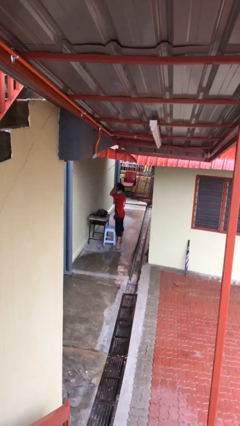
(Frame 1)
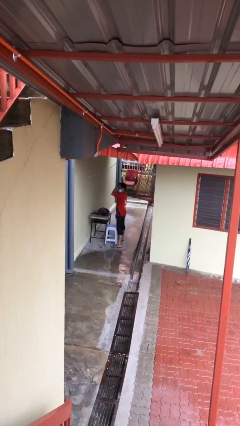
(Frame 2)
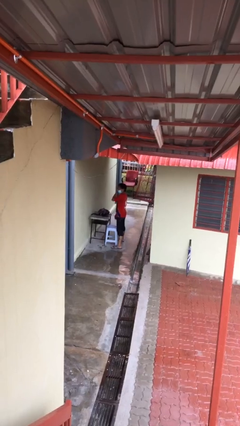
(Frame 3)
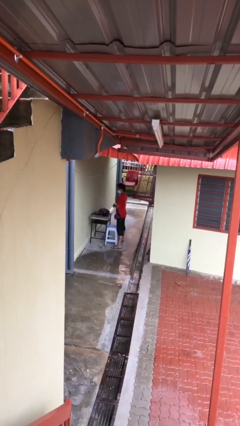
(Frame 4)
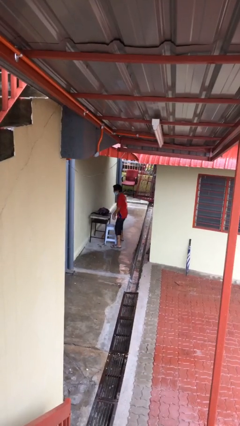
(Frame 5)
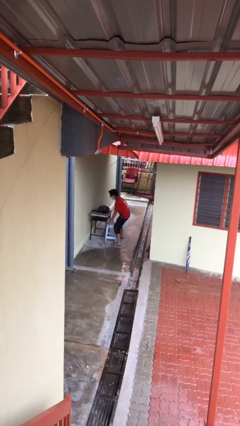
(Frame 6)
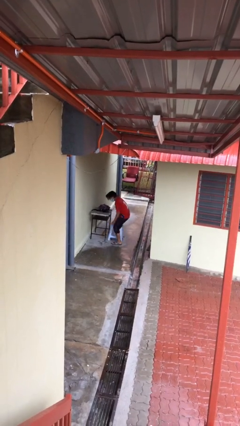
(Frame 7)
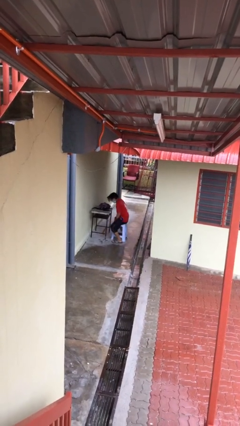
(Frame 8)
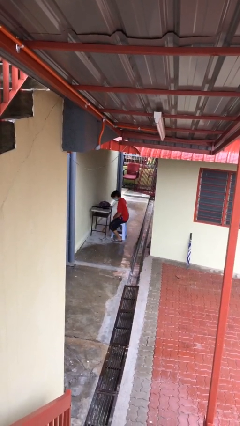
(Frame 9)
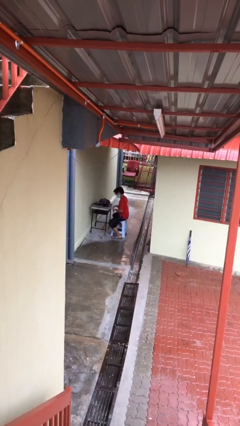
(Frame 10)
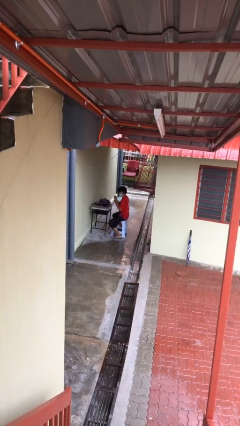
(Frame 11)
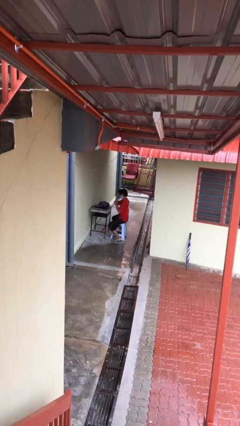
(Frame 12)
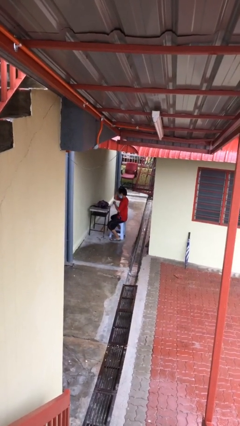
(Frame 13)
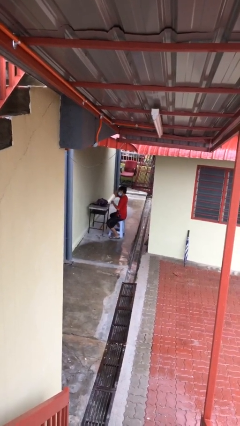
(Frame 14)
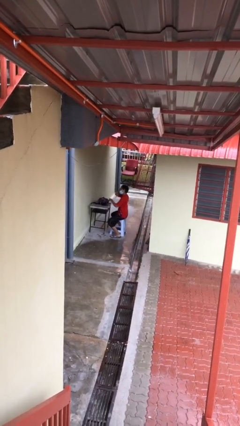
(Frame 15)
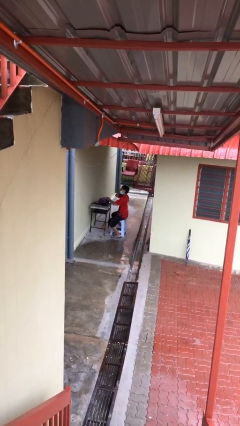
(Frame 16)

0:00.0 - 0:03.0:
person sits down

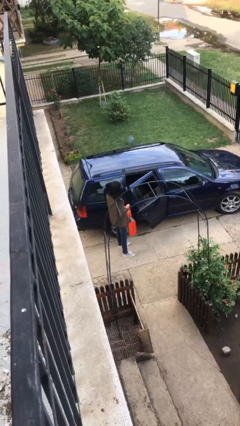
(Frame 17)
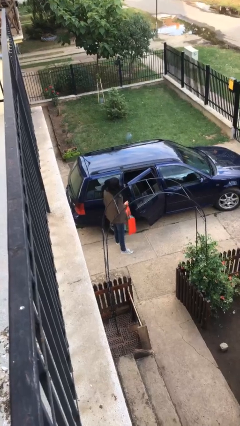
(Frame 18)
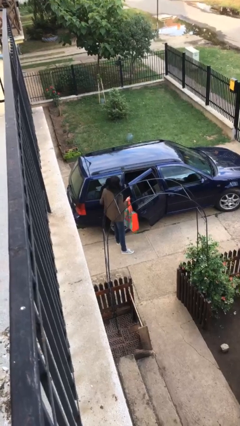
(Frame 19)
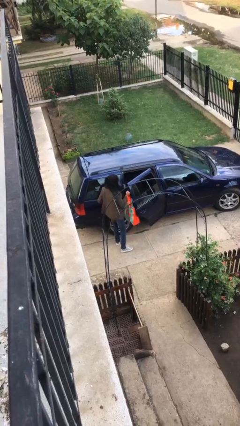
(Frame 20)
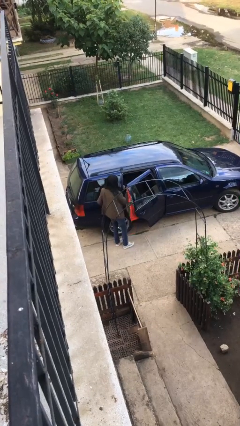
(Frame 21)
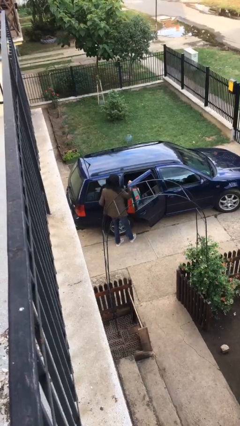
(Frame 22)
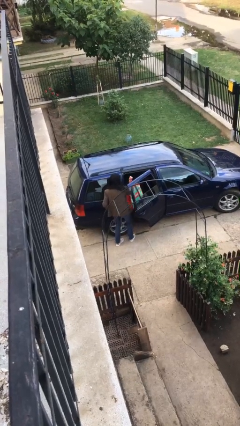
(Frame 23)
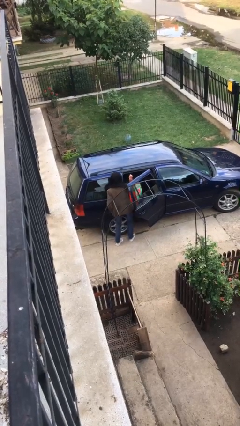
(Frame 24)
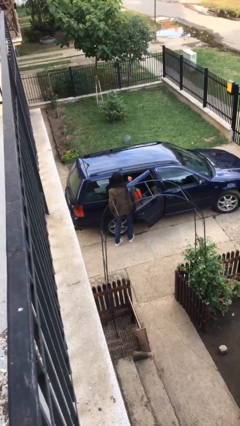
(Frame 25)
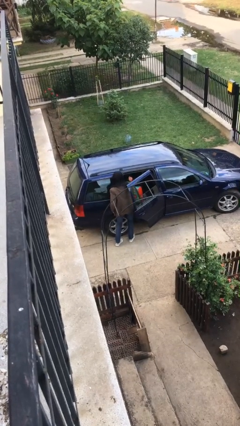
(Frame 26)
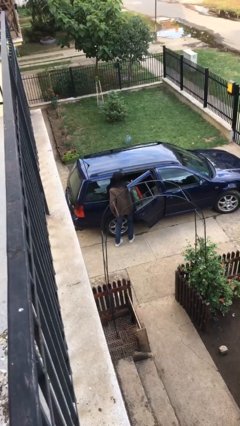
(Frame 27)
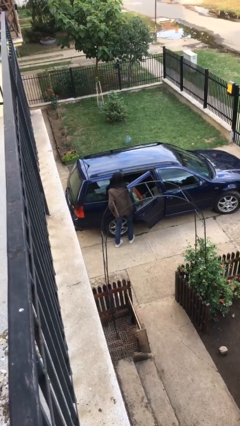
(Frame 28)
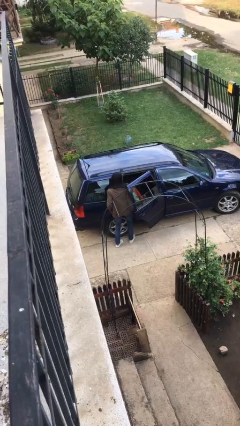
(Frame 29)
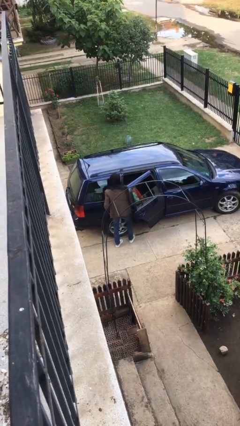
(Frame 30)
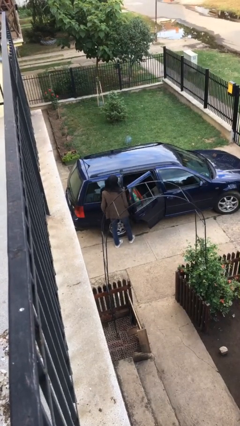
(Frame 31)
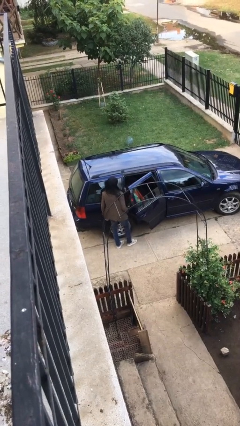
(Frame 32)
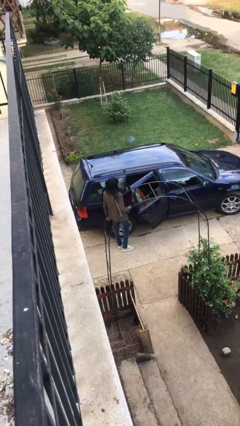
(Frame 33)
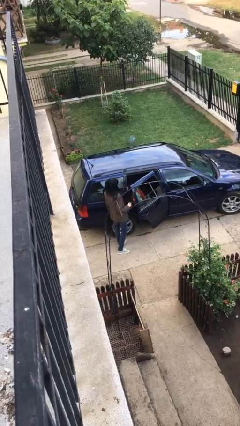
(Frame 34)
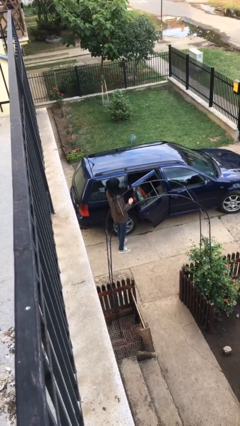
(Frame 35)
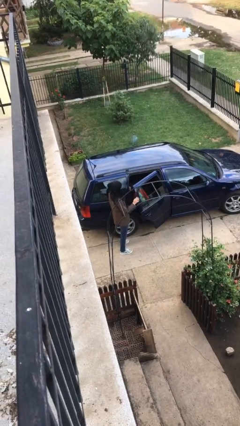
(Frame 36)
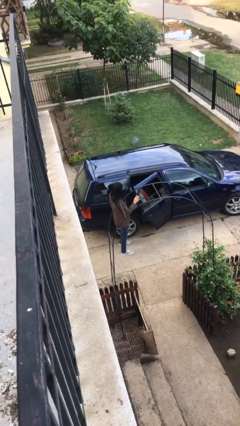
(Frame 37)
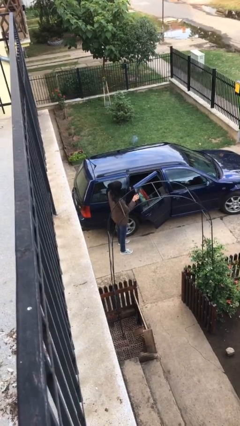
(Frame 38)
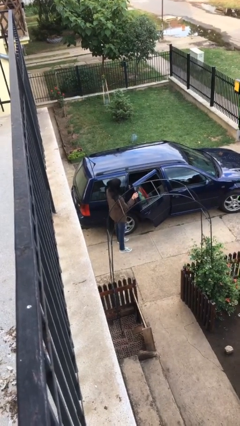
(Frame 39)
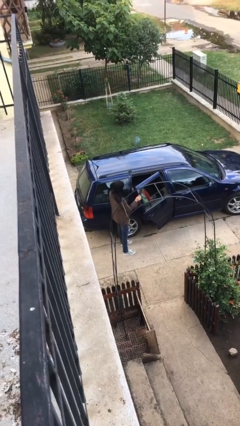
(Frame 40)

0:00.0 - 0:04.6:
person loads car

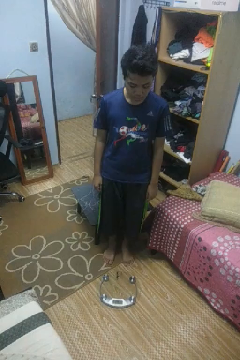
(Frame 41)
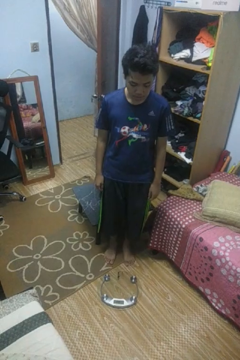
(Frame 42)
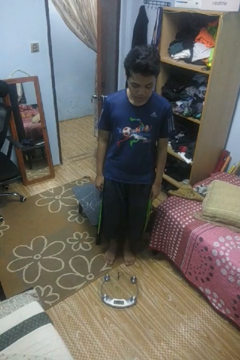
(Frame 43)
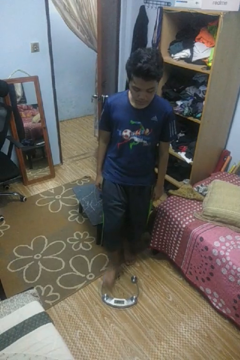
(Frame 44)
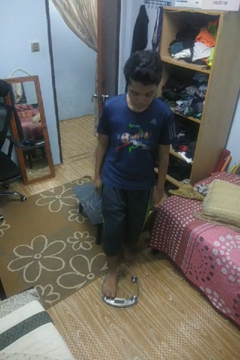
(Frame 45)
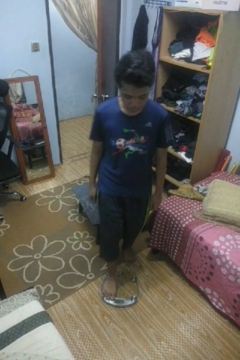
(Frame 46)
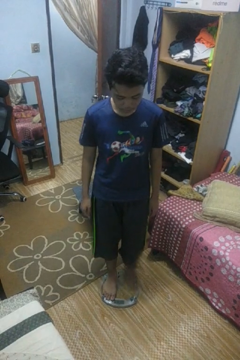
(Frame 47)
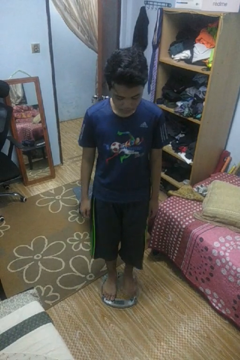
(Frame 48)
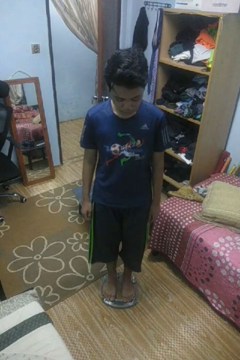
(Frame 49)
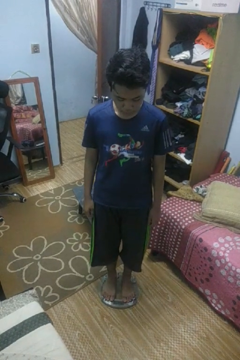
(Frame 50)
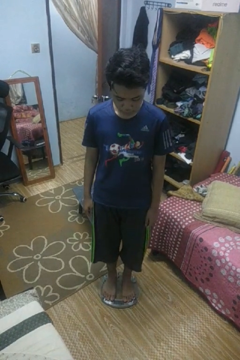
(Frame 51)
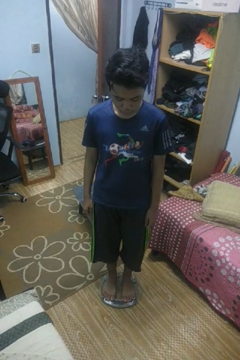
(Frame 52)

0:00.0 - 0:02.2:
person uses bodyweight scale

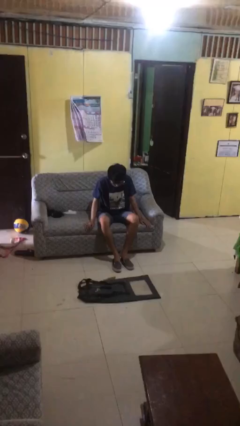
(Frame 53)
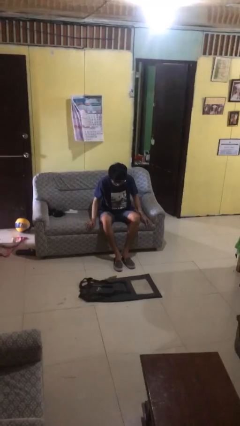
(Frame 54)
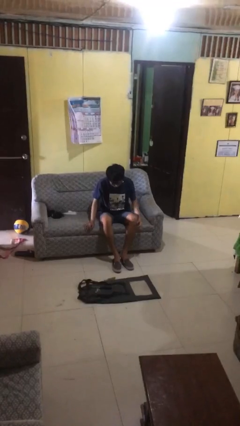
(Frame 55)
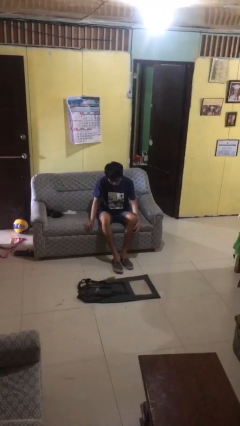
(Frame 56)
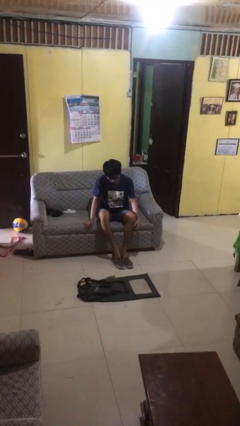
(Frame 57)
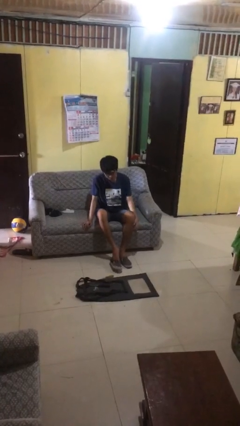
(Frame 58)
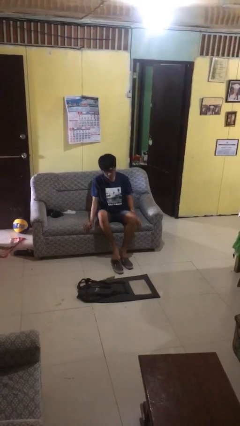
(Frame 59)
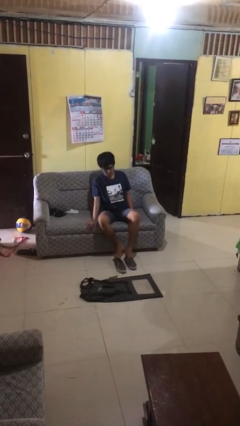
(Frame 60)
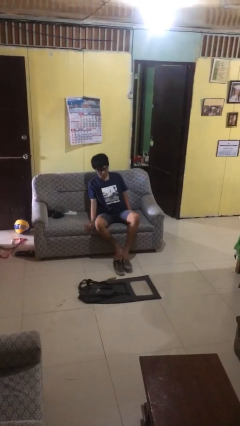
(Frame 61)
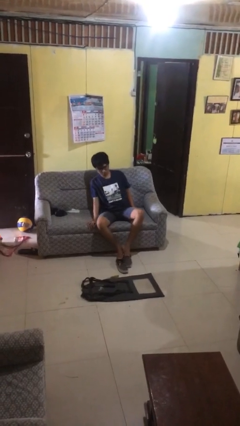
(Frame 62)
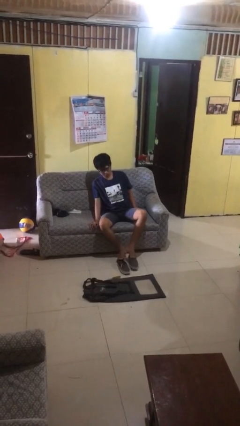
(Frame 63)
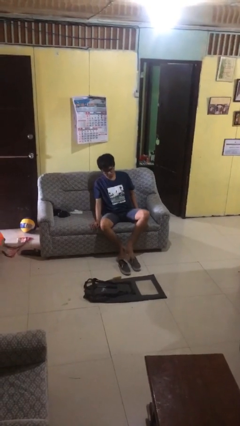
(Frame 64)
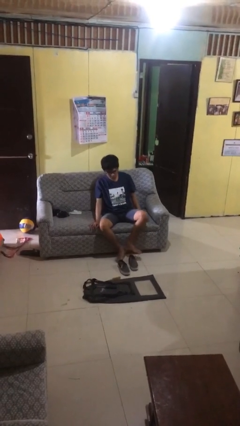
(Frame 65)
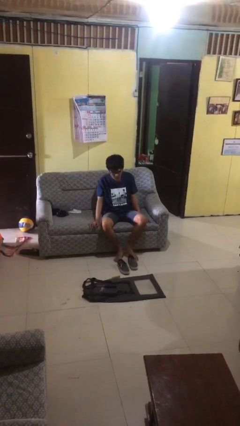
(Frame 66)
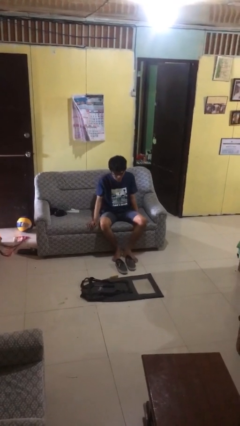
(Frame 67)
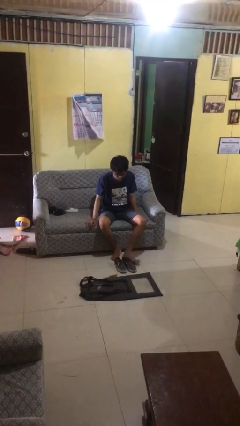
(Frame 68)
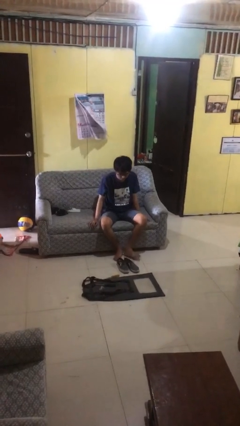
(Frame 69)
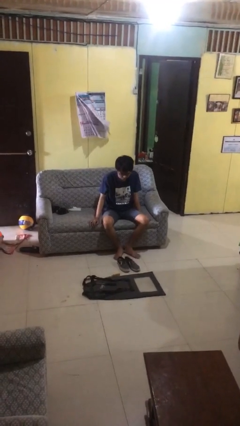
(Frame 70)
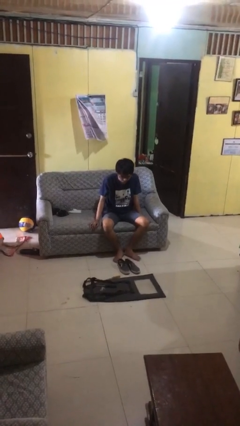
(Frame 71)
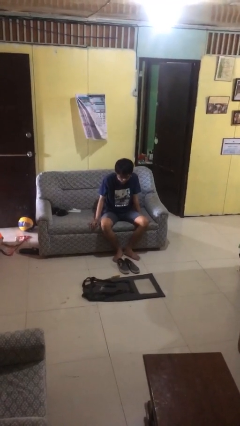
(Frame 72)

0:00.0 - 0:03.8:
person takes off shoes

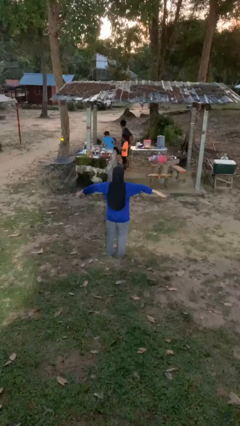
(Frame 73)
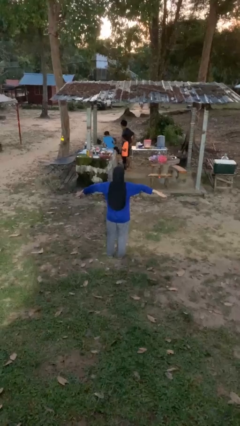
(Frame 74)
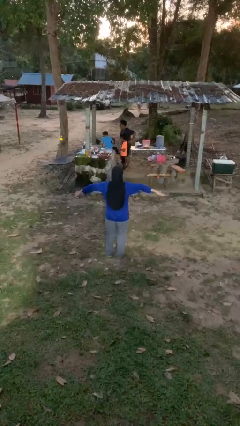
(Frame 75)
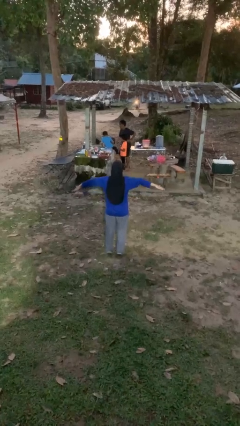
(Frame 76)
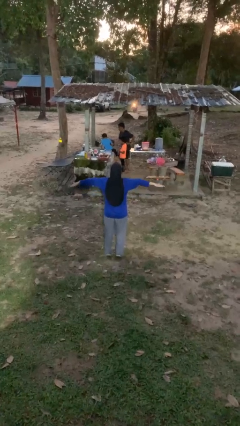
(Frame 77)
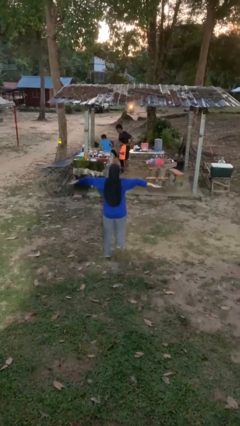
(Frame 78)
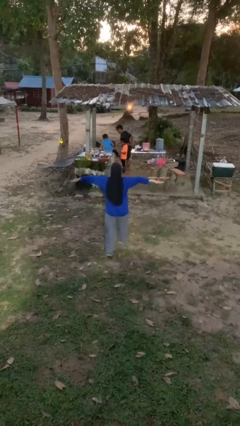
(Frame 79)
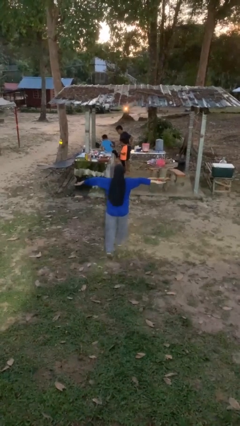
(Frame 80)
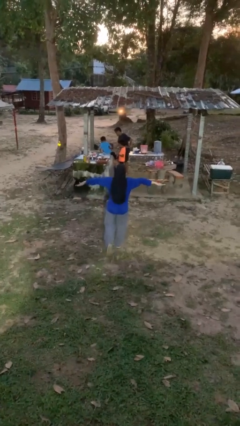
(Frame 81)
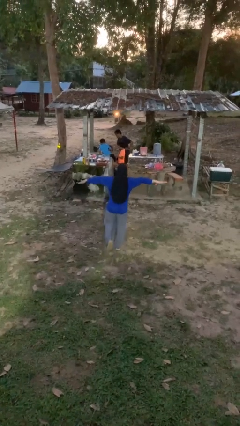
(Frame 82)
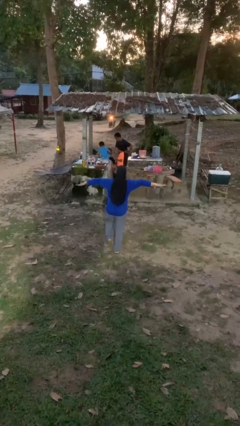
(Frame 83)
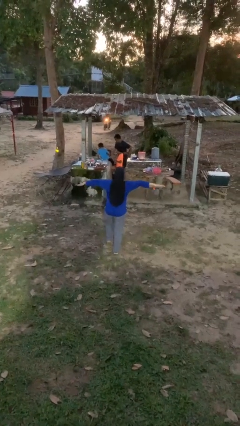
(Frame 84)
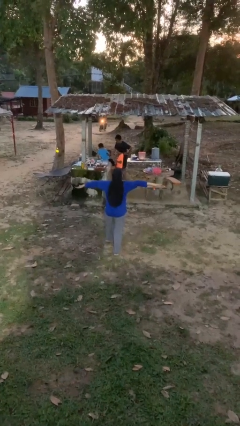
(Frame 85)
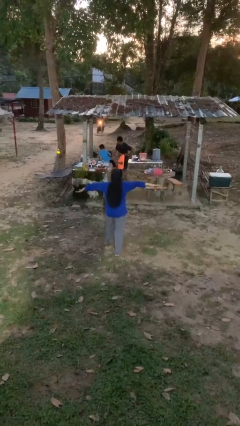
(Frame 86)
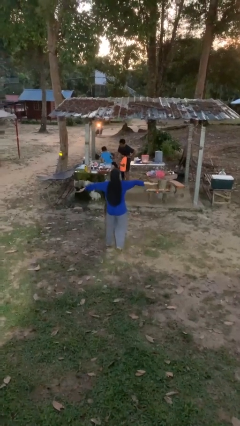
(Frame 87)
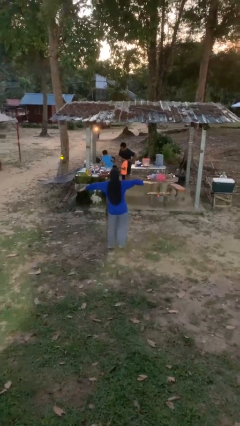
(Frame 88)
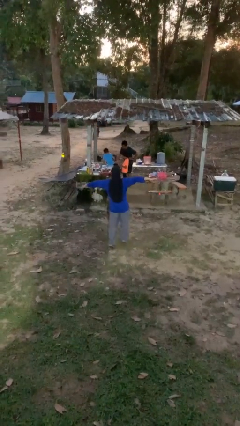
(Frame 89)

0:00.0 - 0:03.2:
person walks tiptoe

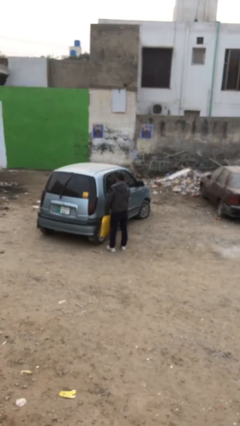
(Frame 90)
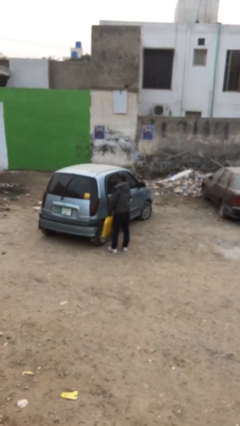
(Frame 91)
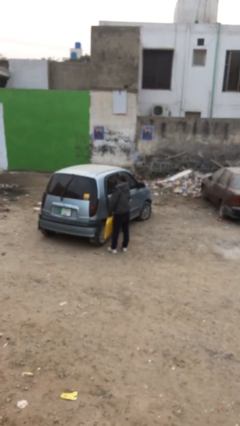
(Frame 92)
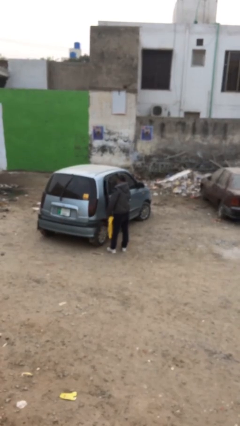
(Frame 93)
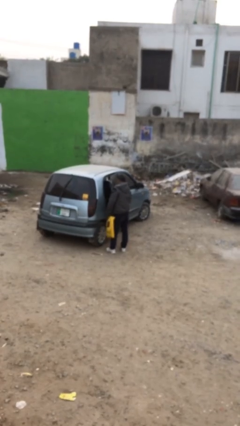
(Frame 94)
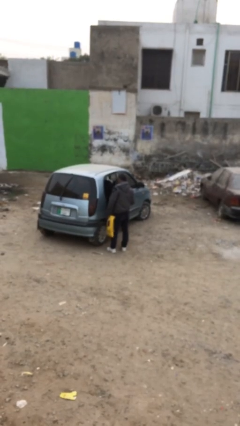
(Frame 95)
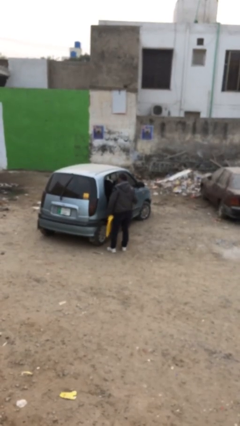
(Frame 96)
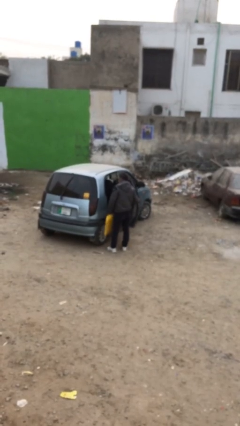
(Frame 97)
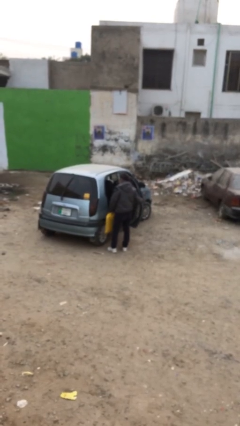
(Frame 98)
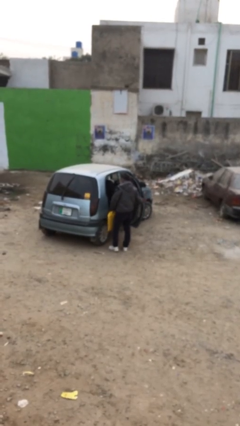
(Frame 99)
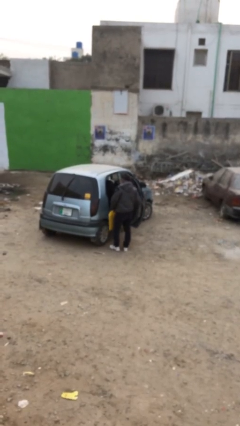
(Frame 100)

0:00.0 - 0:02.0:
person opens car door
